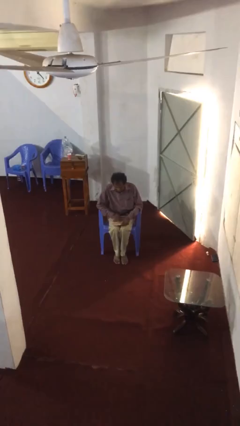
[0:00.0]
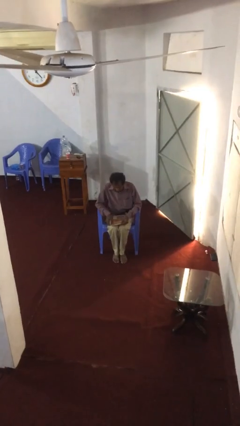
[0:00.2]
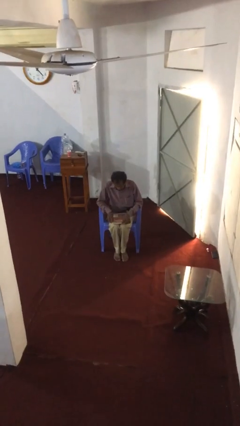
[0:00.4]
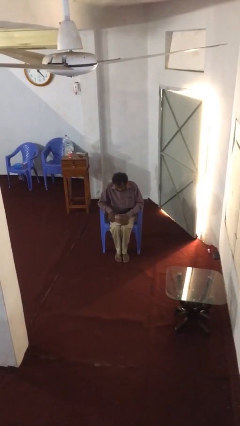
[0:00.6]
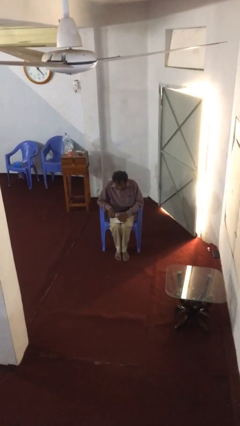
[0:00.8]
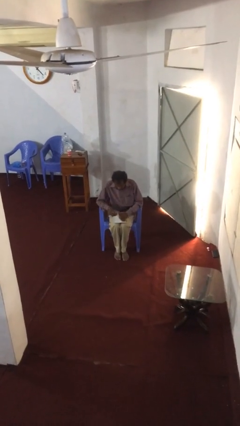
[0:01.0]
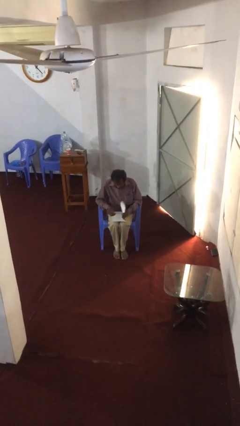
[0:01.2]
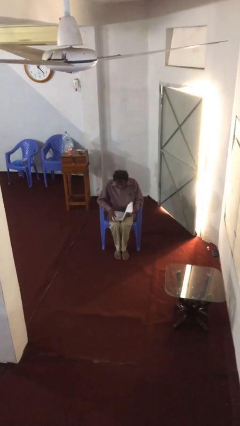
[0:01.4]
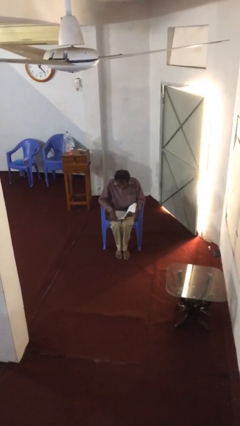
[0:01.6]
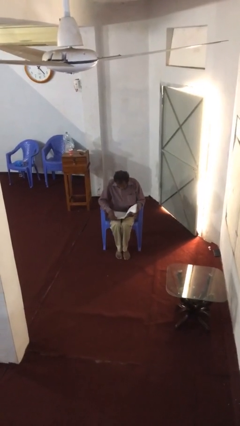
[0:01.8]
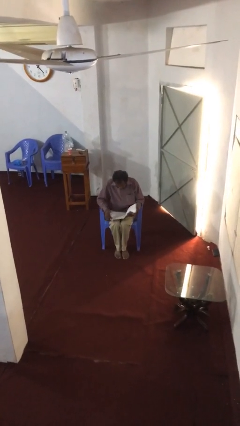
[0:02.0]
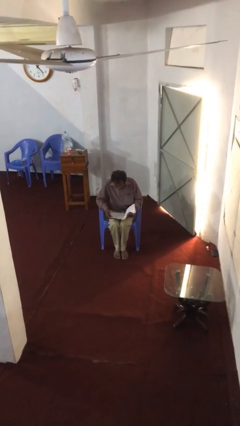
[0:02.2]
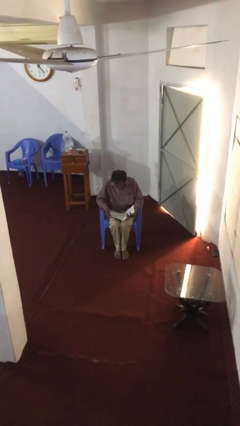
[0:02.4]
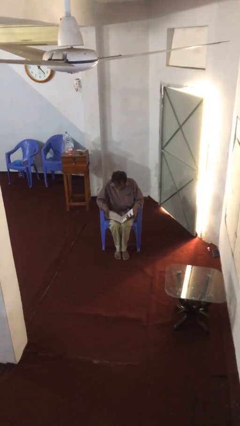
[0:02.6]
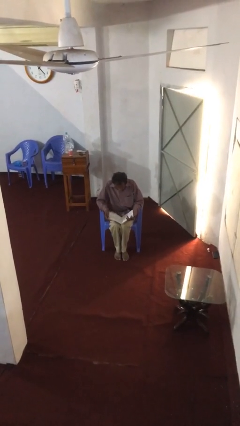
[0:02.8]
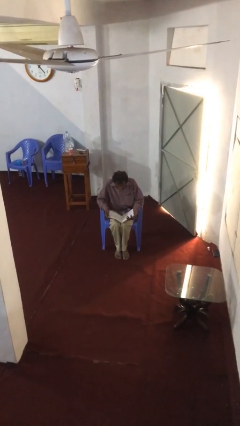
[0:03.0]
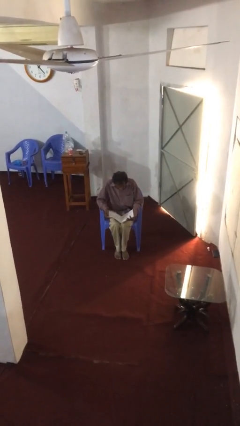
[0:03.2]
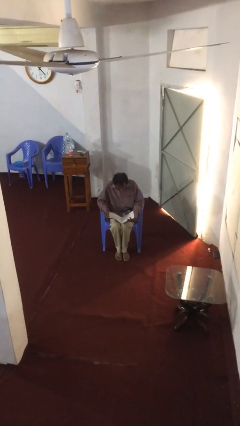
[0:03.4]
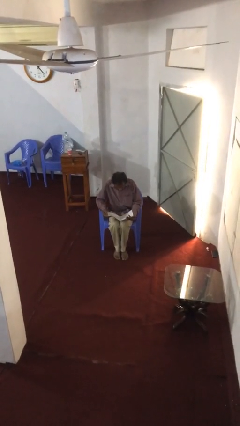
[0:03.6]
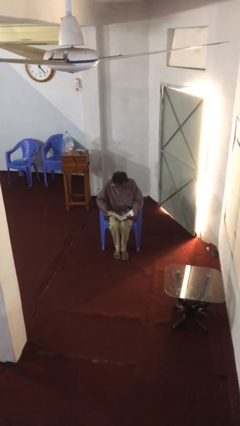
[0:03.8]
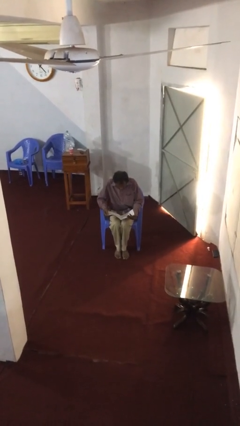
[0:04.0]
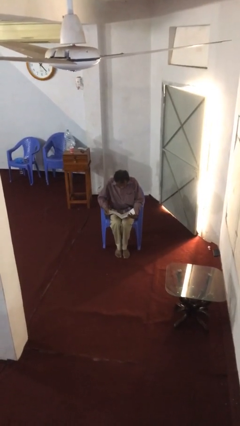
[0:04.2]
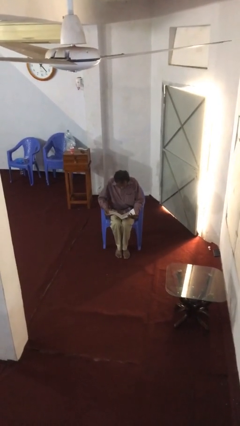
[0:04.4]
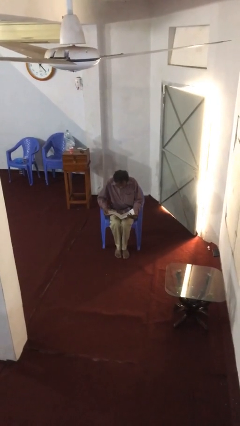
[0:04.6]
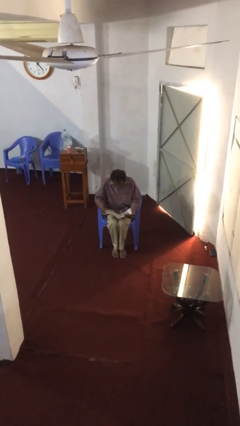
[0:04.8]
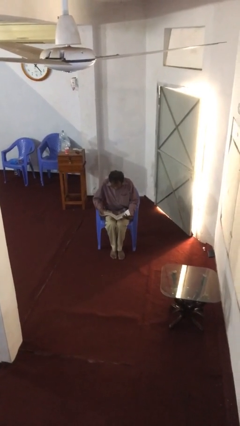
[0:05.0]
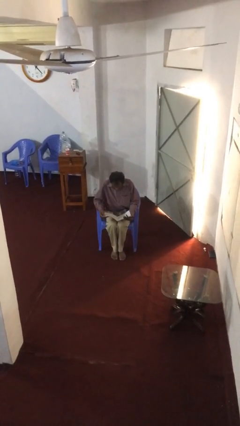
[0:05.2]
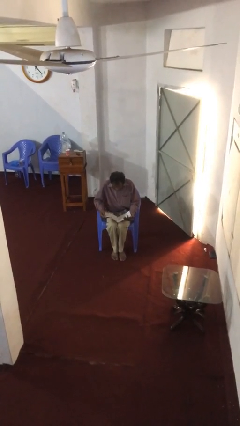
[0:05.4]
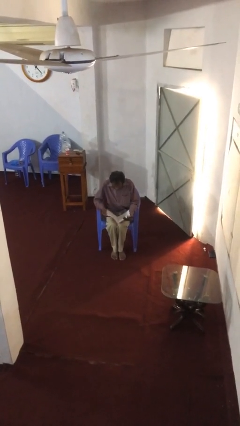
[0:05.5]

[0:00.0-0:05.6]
person reads document

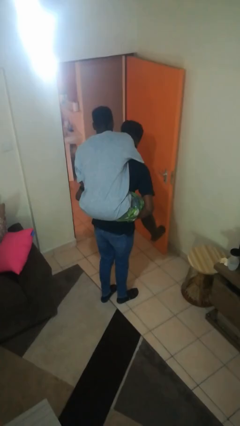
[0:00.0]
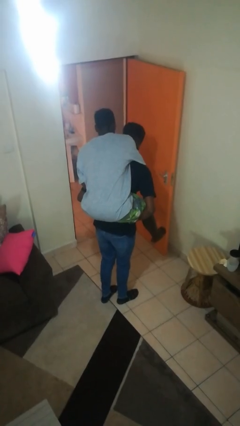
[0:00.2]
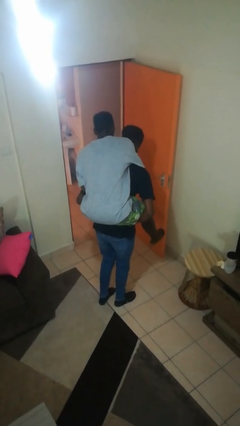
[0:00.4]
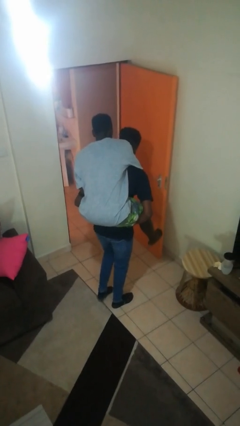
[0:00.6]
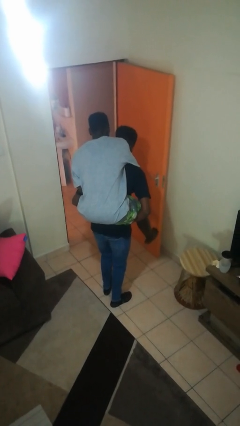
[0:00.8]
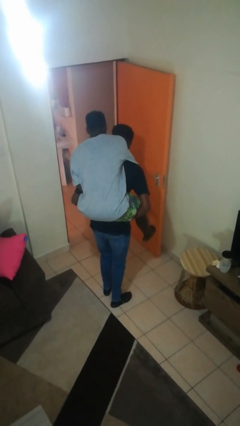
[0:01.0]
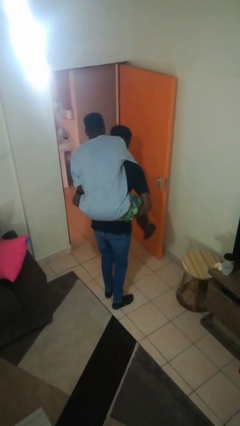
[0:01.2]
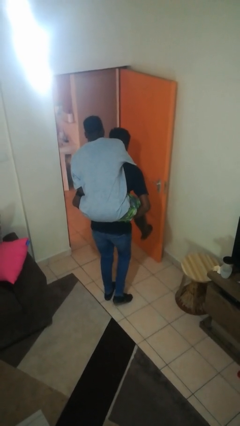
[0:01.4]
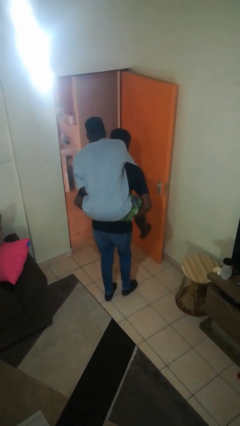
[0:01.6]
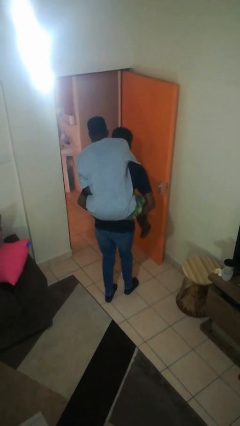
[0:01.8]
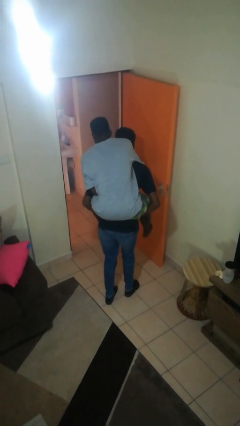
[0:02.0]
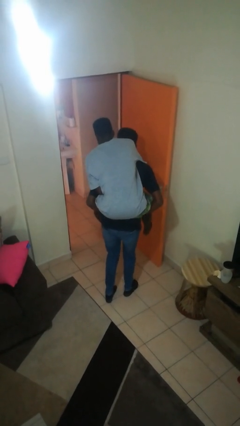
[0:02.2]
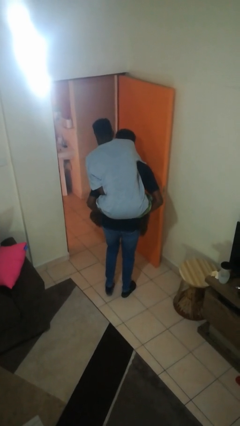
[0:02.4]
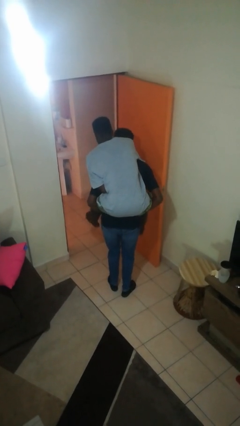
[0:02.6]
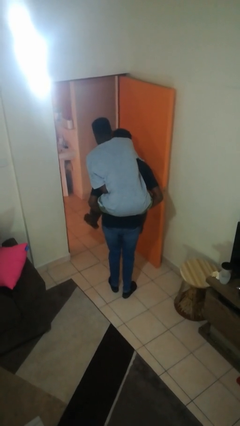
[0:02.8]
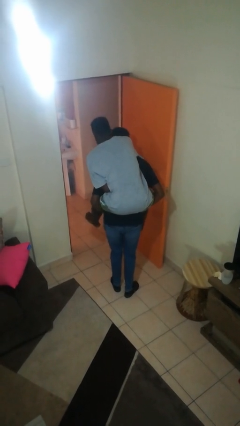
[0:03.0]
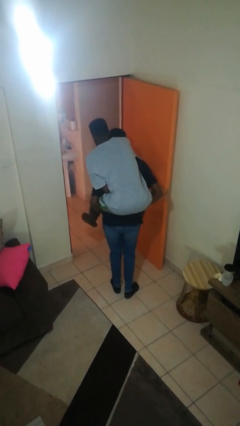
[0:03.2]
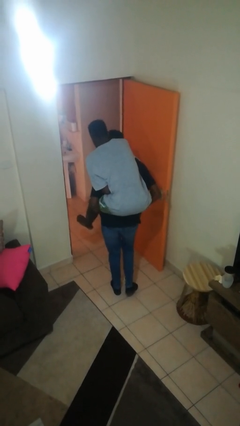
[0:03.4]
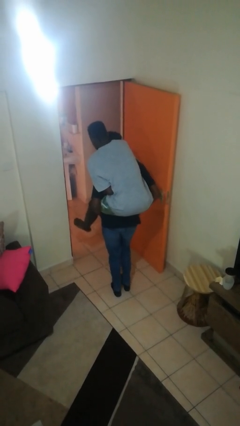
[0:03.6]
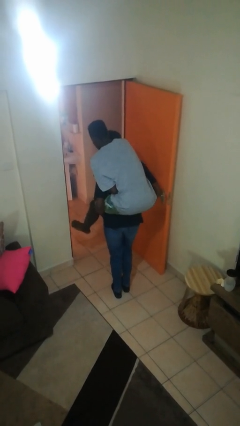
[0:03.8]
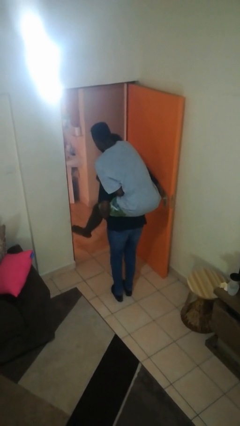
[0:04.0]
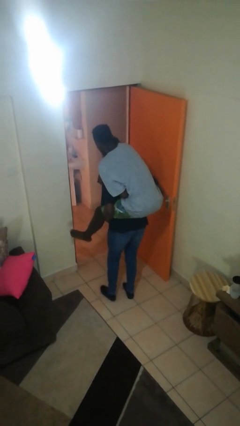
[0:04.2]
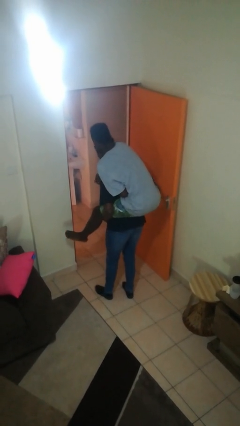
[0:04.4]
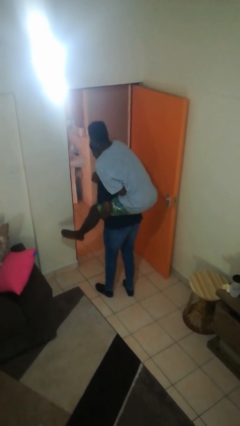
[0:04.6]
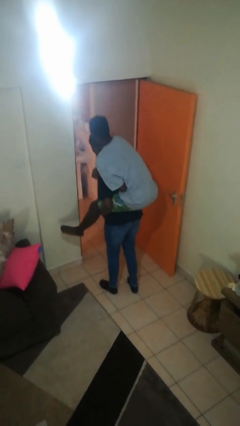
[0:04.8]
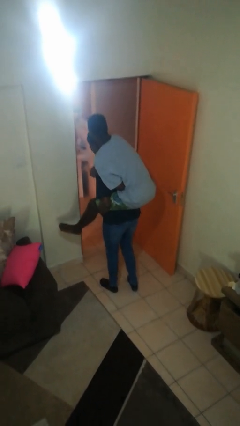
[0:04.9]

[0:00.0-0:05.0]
person carries person on back

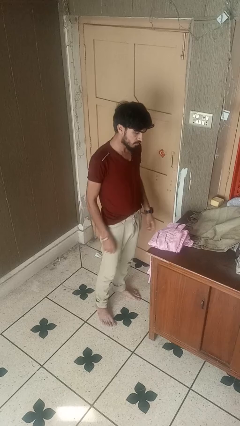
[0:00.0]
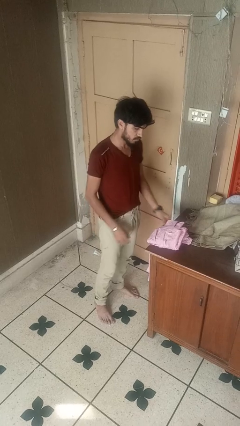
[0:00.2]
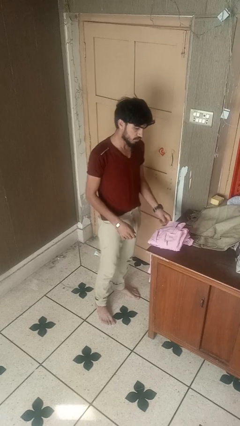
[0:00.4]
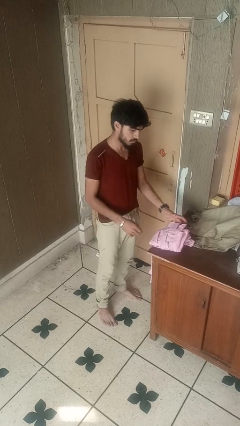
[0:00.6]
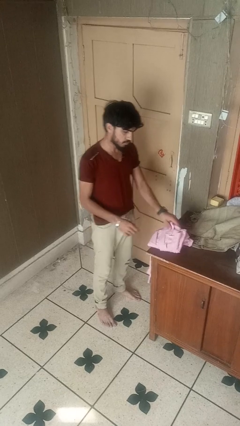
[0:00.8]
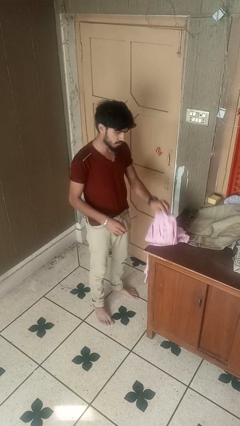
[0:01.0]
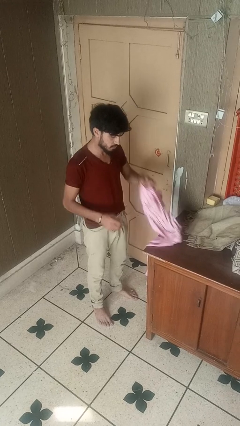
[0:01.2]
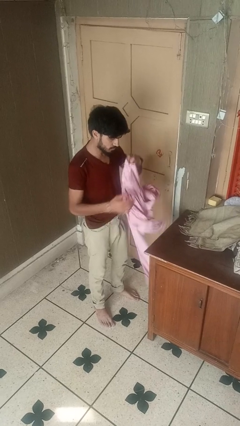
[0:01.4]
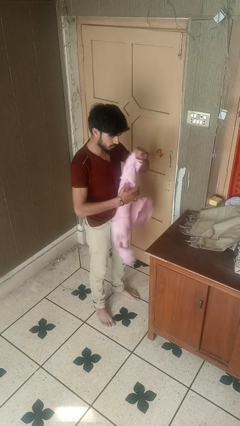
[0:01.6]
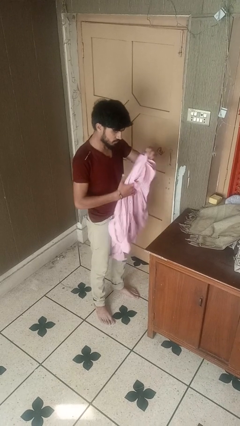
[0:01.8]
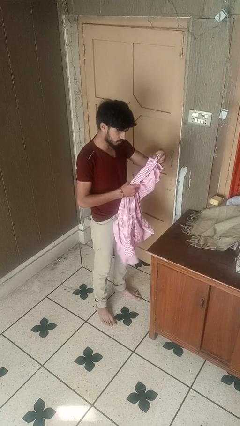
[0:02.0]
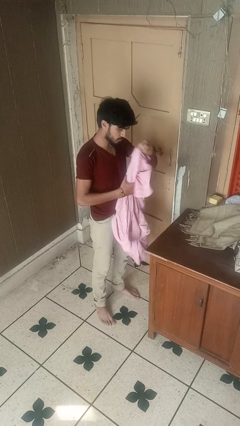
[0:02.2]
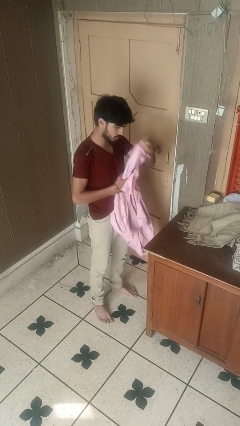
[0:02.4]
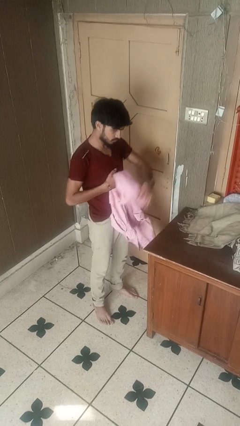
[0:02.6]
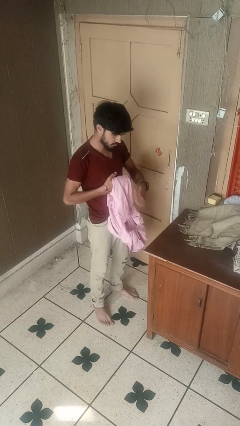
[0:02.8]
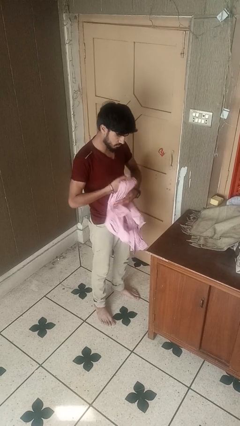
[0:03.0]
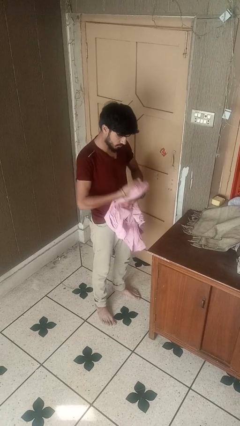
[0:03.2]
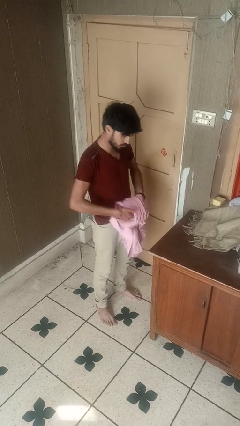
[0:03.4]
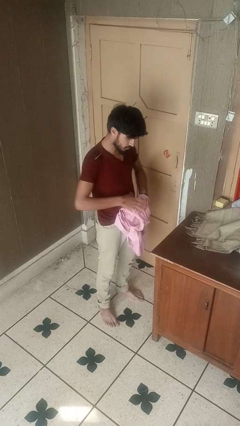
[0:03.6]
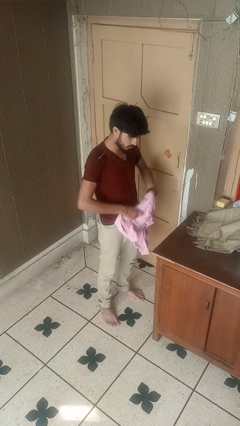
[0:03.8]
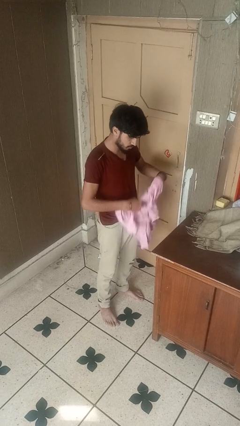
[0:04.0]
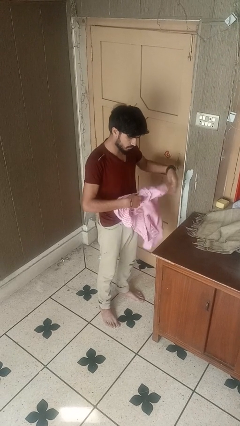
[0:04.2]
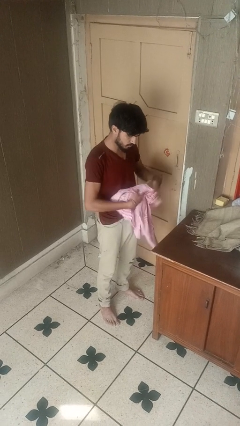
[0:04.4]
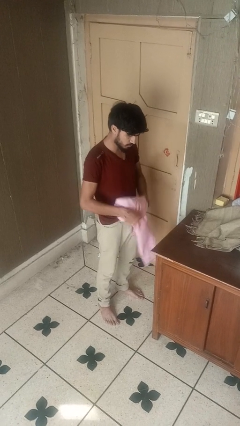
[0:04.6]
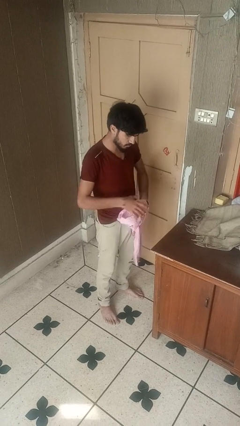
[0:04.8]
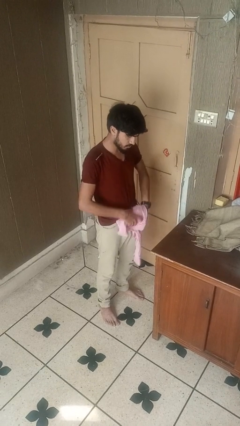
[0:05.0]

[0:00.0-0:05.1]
person folds shirt

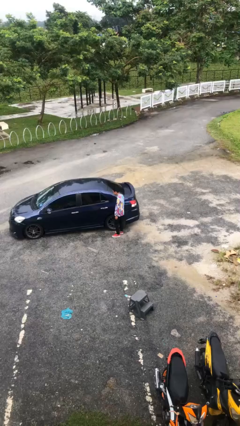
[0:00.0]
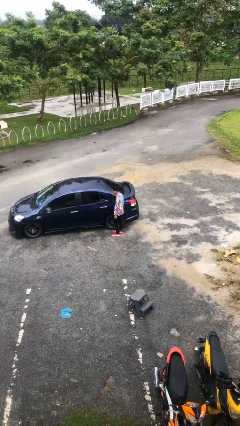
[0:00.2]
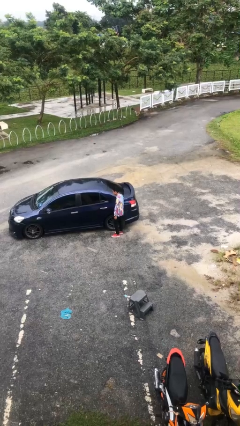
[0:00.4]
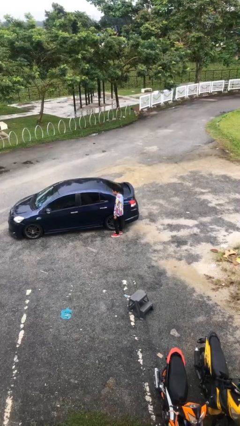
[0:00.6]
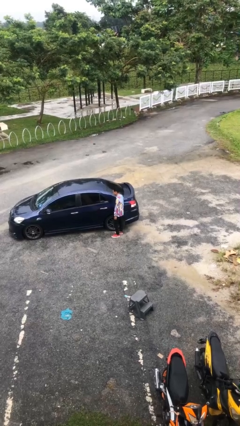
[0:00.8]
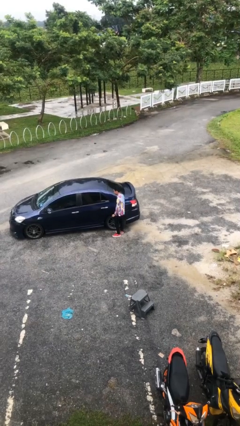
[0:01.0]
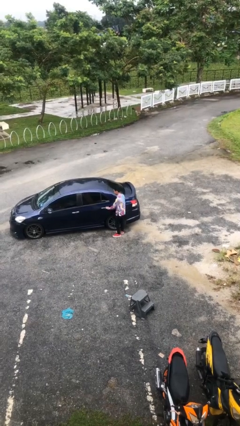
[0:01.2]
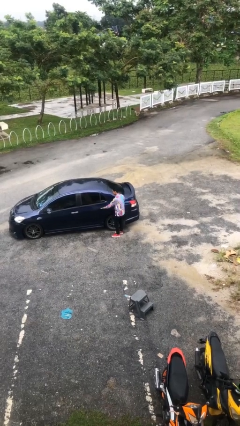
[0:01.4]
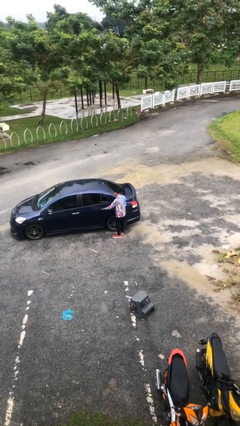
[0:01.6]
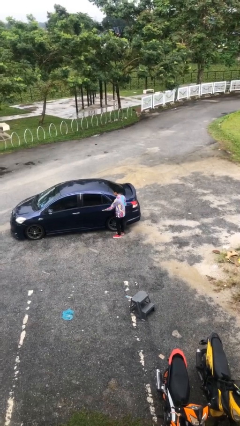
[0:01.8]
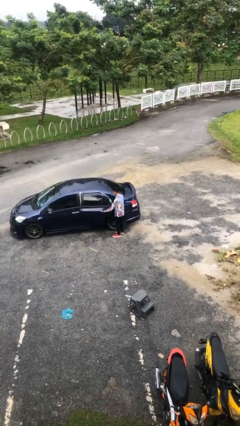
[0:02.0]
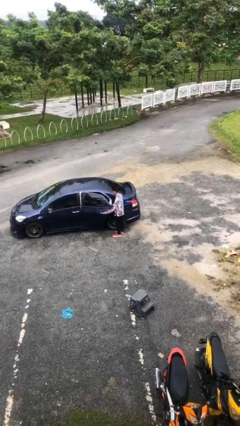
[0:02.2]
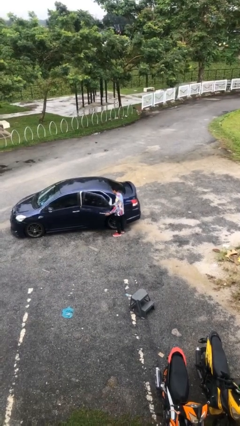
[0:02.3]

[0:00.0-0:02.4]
person opens car door
